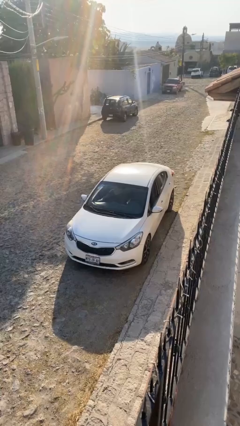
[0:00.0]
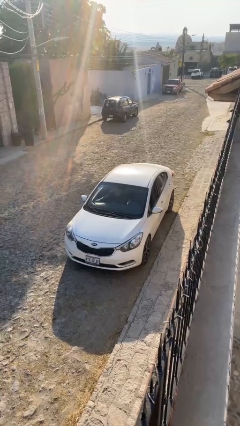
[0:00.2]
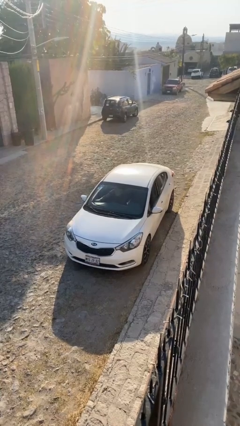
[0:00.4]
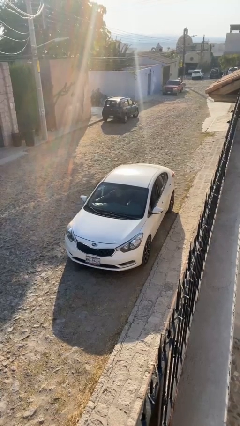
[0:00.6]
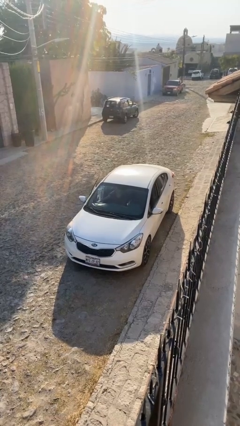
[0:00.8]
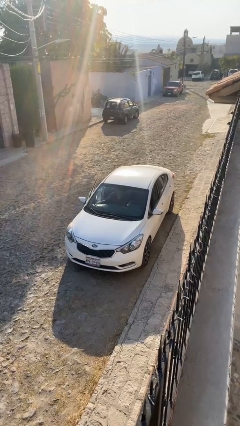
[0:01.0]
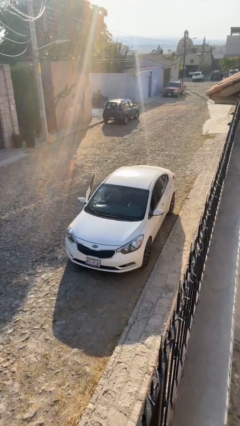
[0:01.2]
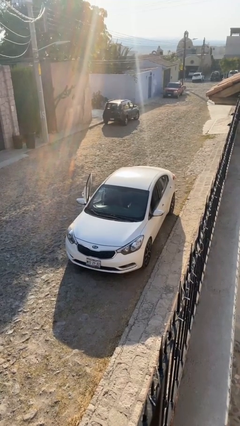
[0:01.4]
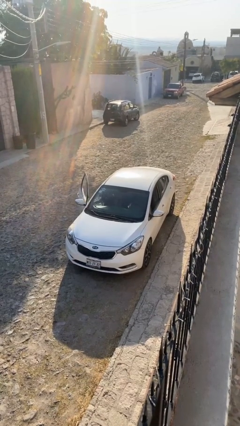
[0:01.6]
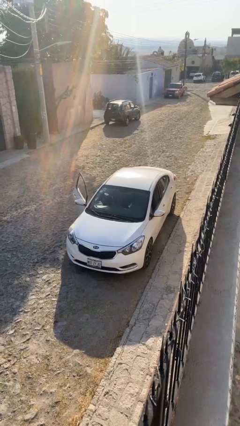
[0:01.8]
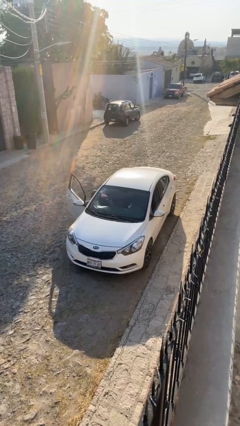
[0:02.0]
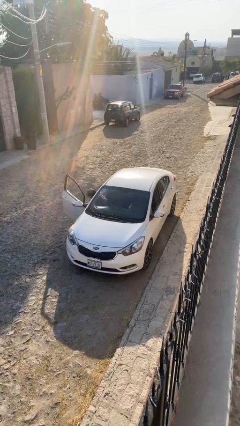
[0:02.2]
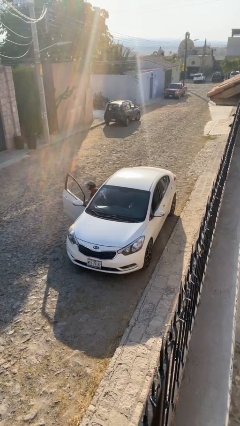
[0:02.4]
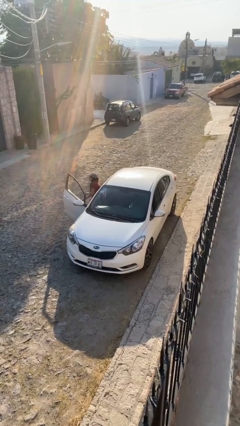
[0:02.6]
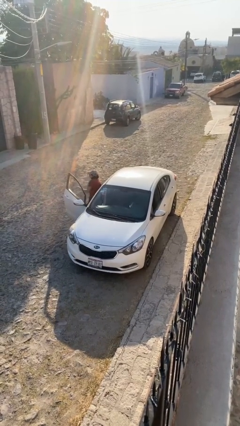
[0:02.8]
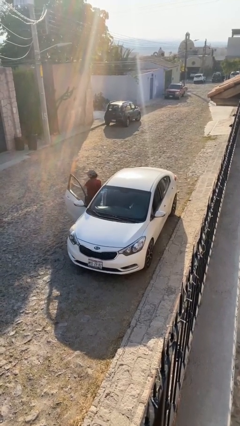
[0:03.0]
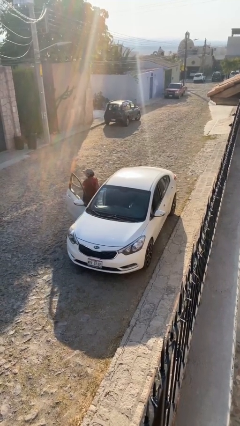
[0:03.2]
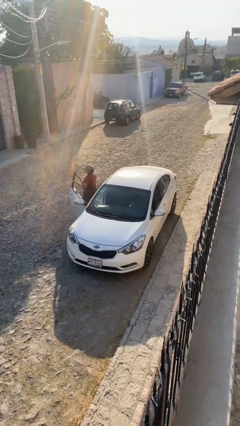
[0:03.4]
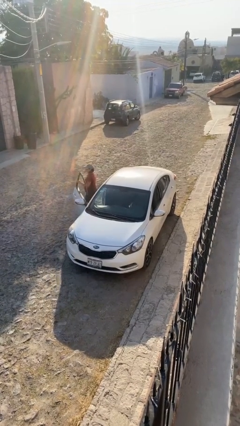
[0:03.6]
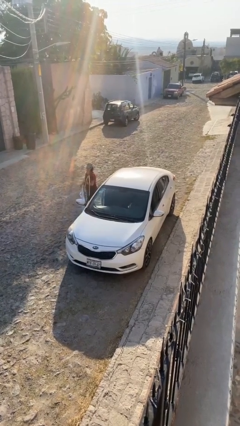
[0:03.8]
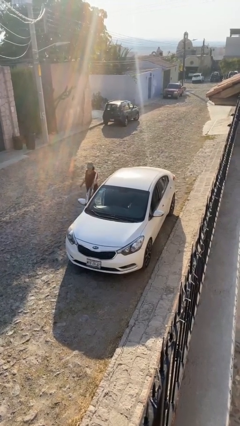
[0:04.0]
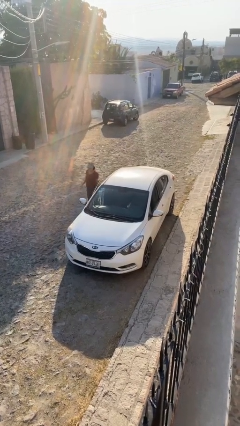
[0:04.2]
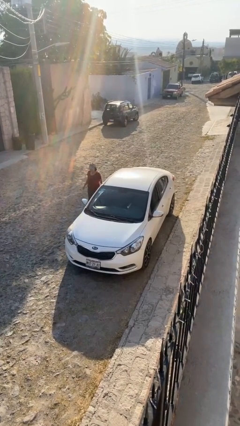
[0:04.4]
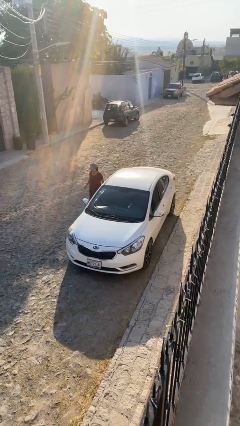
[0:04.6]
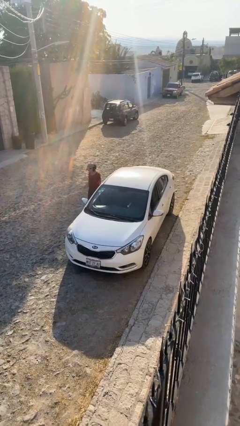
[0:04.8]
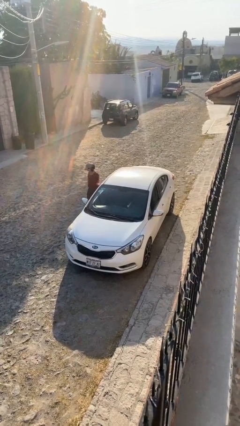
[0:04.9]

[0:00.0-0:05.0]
car drops off person

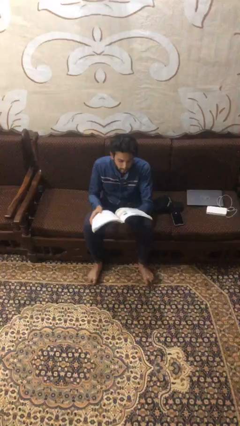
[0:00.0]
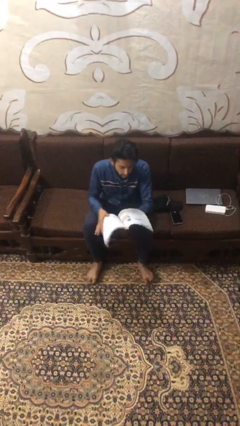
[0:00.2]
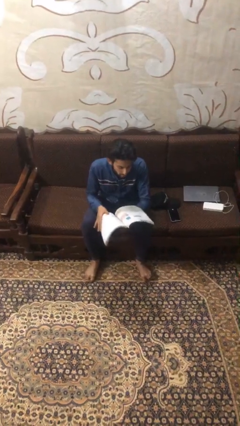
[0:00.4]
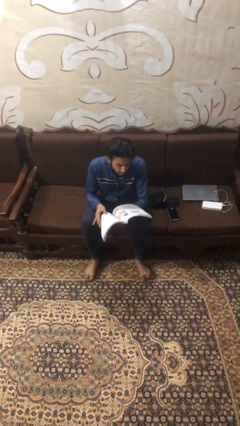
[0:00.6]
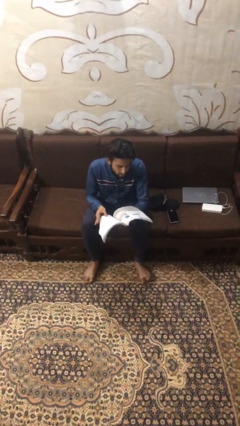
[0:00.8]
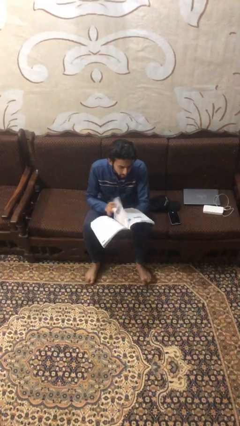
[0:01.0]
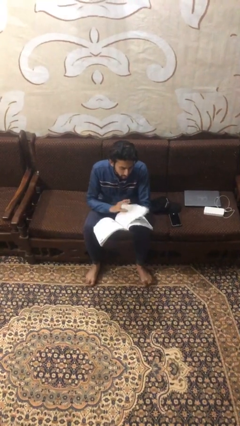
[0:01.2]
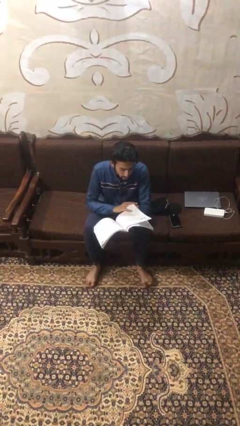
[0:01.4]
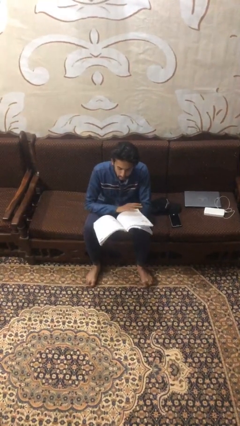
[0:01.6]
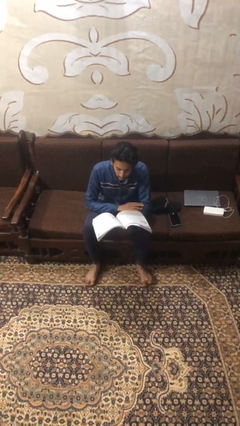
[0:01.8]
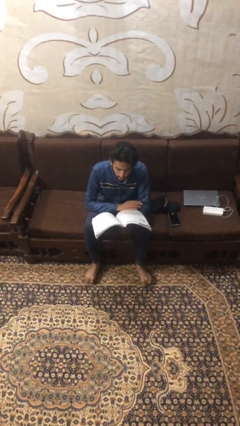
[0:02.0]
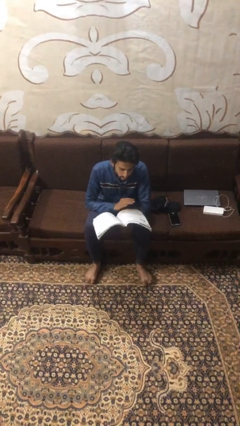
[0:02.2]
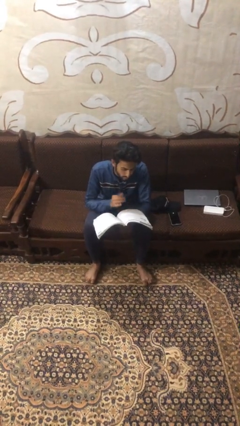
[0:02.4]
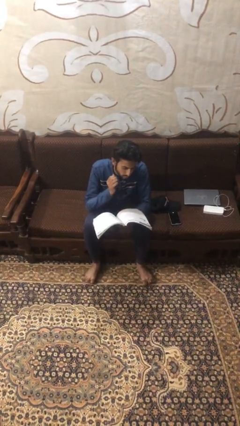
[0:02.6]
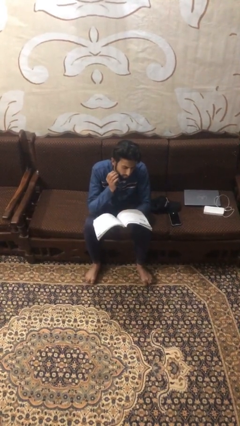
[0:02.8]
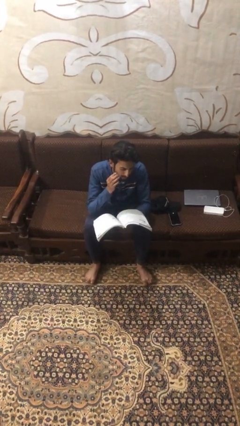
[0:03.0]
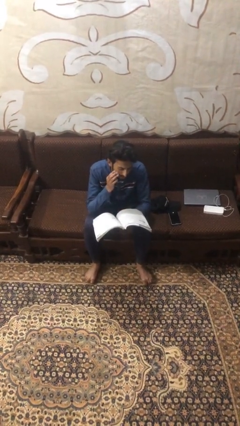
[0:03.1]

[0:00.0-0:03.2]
person reads document

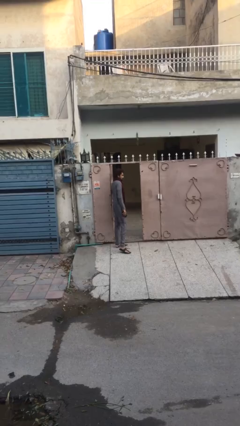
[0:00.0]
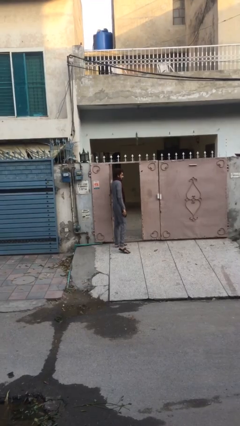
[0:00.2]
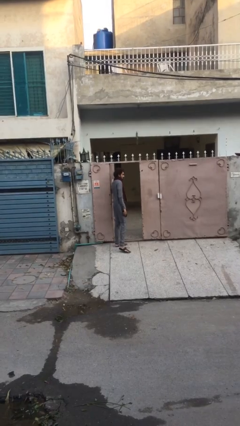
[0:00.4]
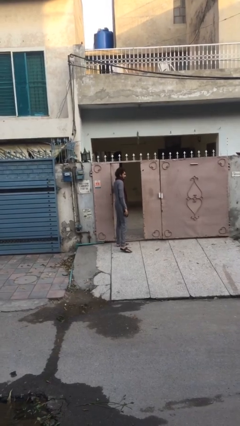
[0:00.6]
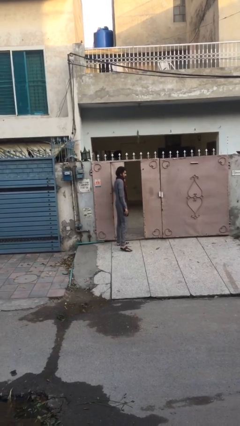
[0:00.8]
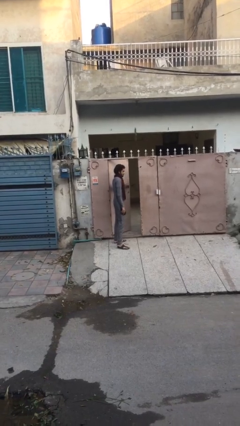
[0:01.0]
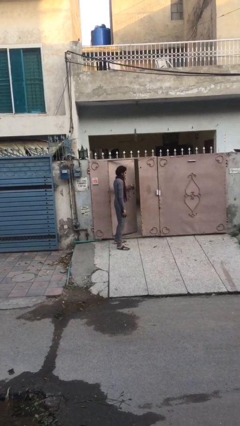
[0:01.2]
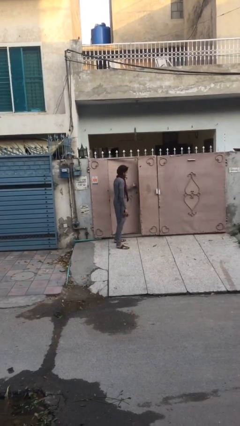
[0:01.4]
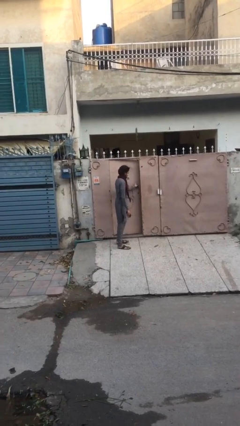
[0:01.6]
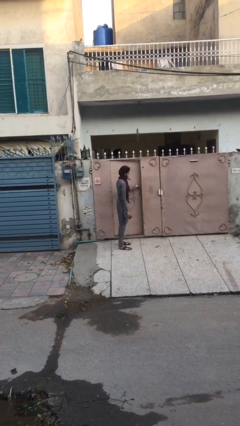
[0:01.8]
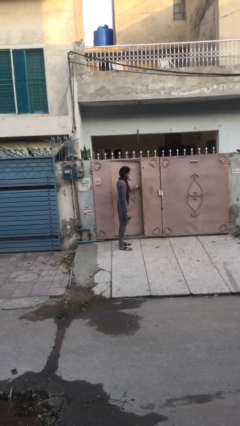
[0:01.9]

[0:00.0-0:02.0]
person closes facility door

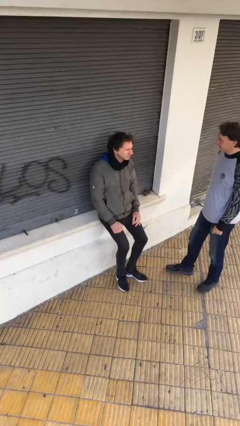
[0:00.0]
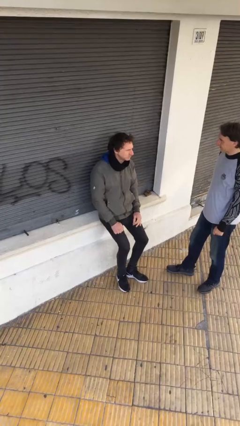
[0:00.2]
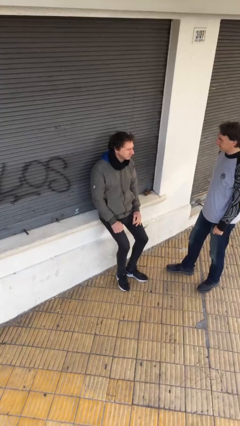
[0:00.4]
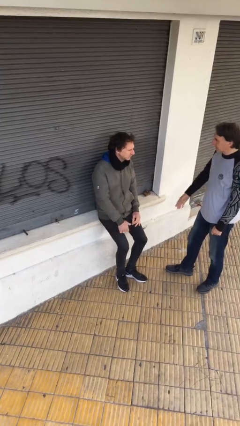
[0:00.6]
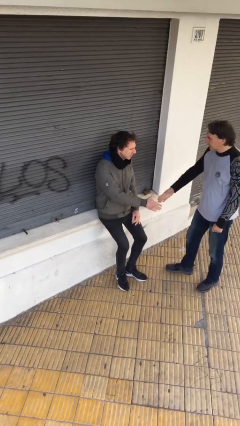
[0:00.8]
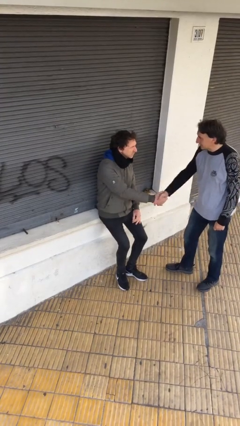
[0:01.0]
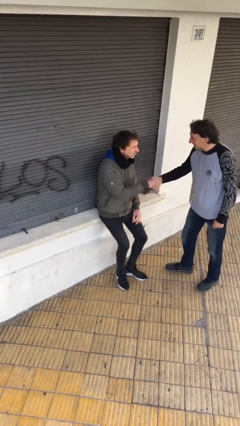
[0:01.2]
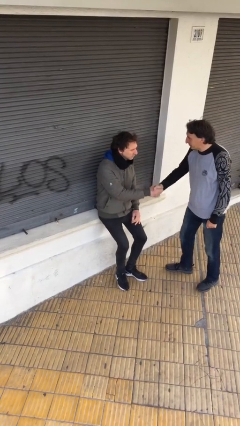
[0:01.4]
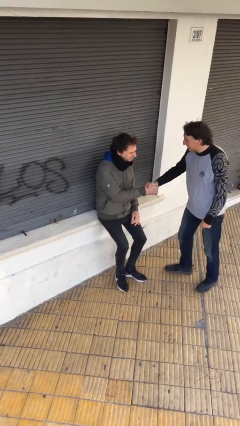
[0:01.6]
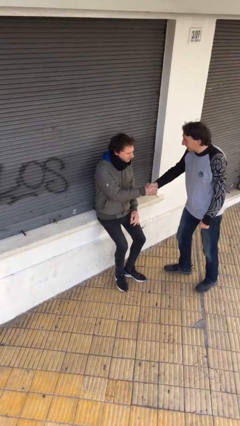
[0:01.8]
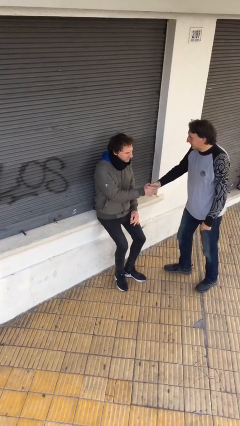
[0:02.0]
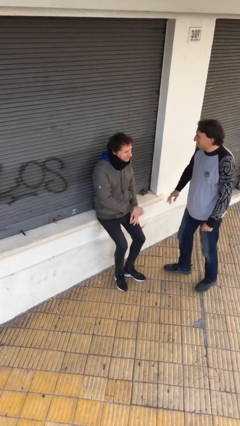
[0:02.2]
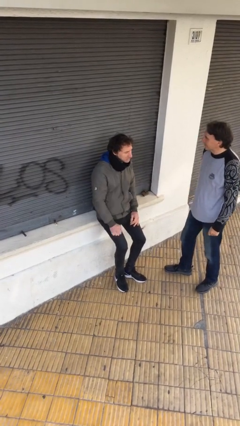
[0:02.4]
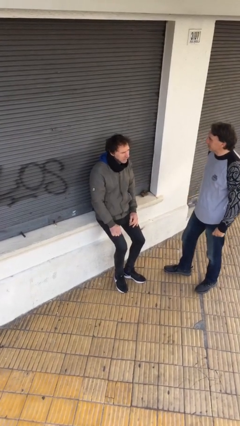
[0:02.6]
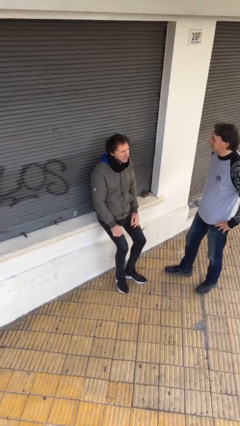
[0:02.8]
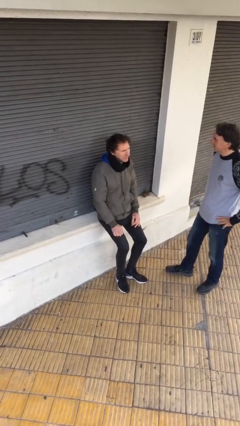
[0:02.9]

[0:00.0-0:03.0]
person shakes hand

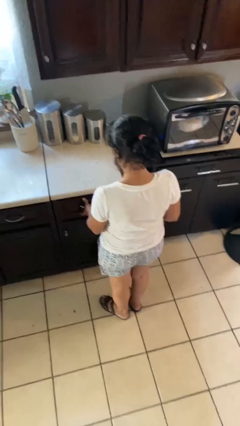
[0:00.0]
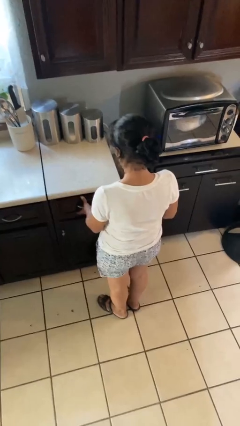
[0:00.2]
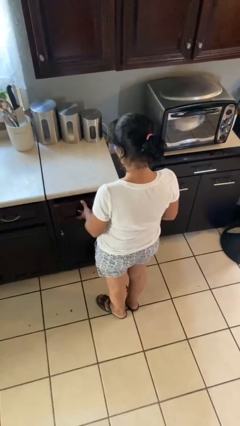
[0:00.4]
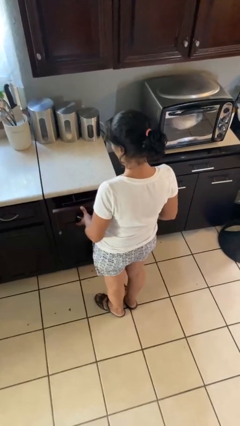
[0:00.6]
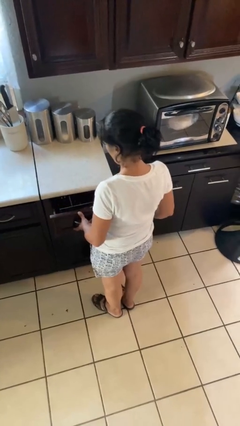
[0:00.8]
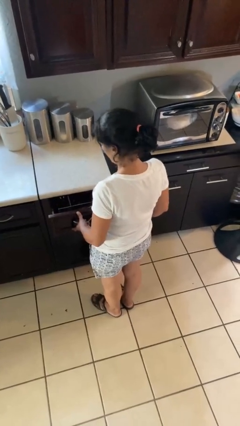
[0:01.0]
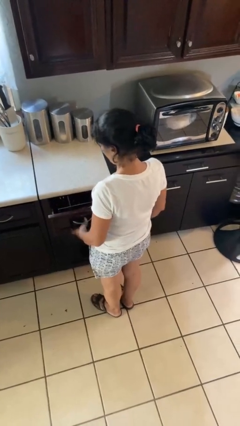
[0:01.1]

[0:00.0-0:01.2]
person opens kitchen drawer

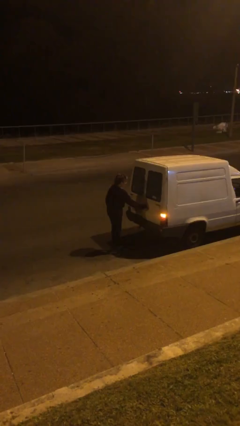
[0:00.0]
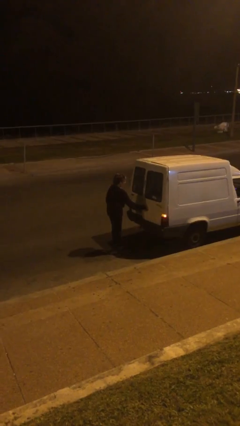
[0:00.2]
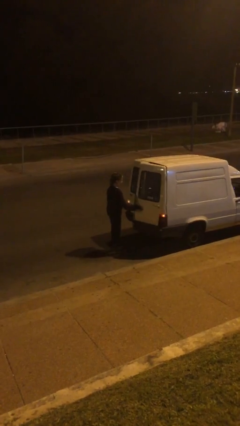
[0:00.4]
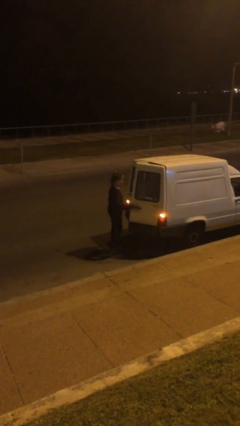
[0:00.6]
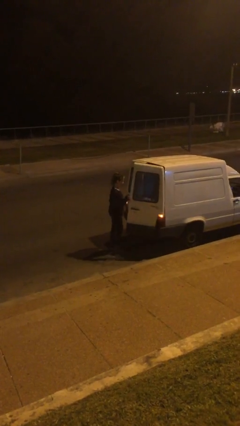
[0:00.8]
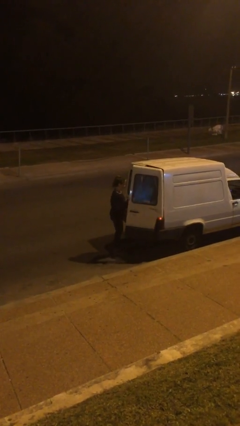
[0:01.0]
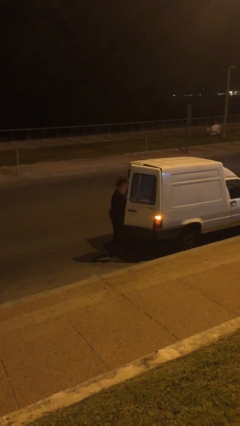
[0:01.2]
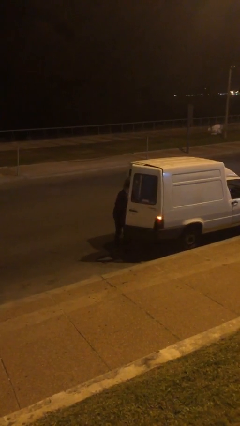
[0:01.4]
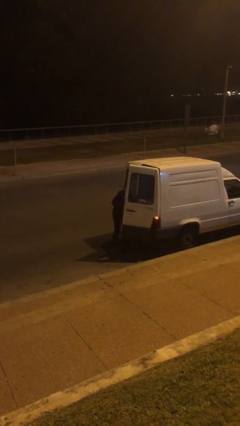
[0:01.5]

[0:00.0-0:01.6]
person opens car door

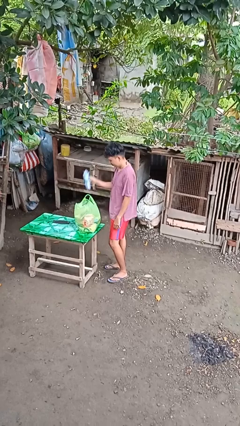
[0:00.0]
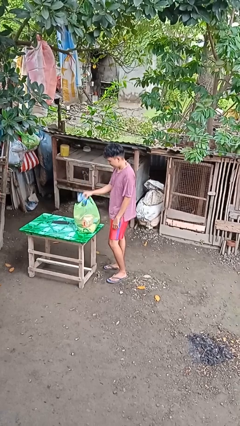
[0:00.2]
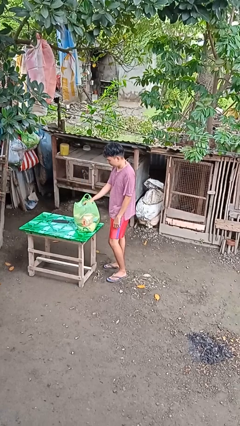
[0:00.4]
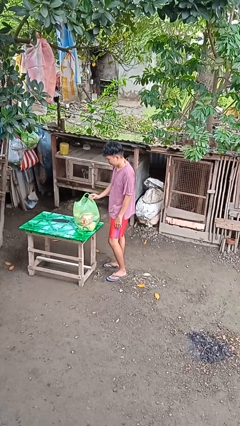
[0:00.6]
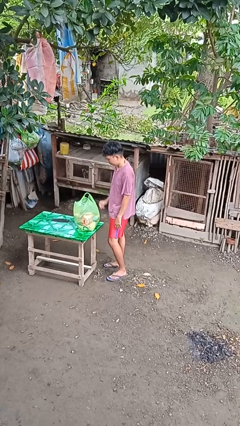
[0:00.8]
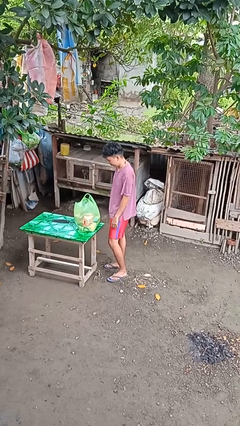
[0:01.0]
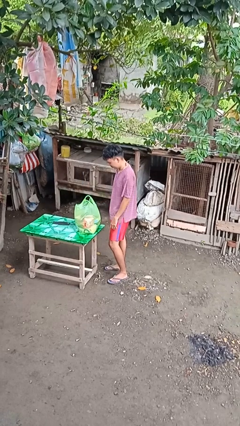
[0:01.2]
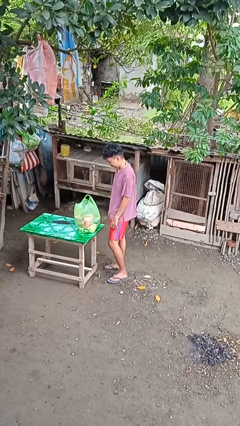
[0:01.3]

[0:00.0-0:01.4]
person puts object into bag
